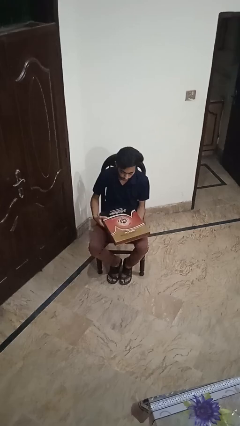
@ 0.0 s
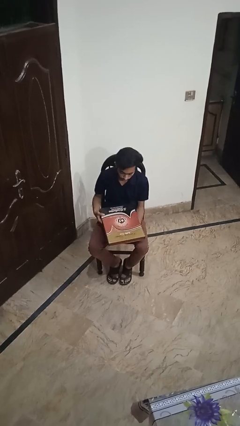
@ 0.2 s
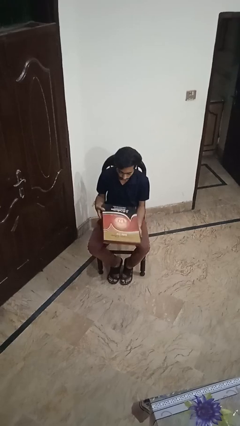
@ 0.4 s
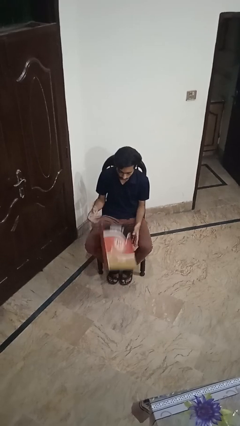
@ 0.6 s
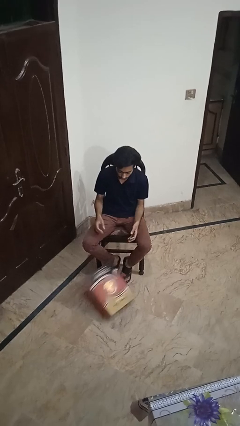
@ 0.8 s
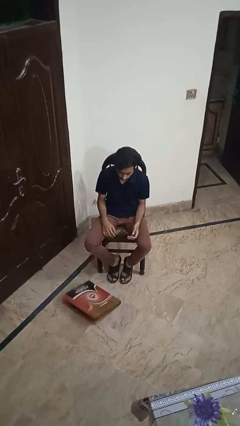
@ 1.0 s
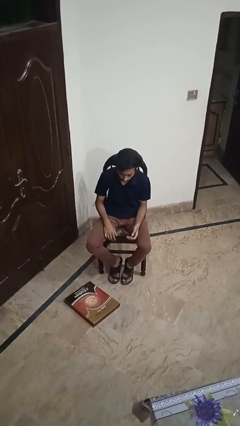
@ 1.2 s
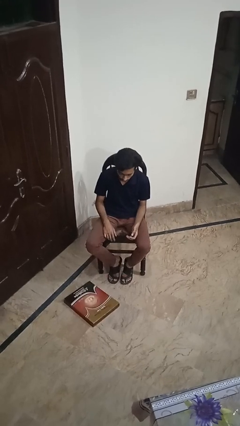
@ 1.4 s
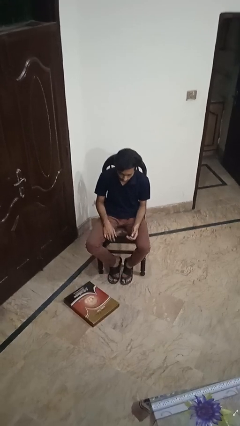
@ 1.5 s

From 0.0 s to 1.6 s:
person drops object

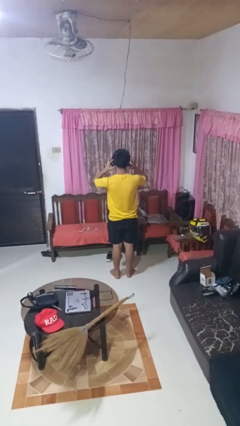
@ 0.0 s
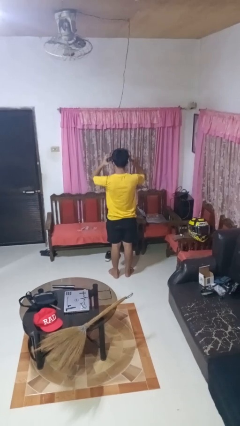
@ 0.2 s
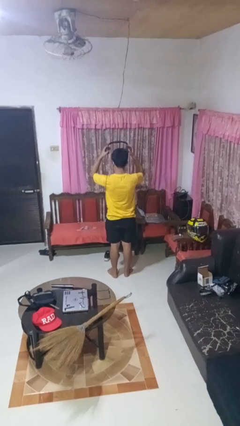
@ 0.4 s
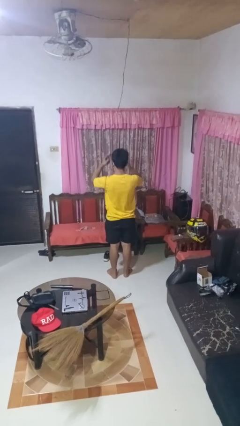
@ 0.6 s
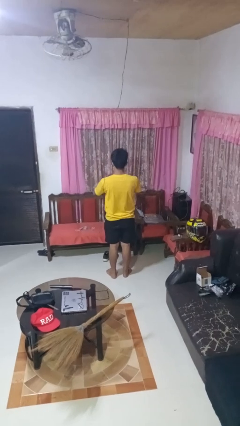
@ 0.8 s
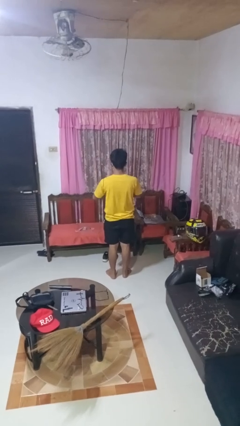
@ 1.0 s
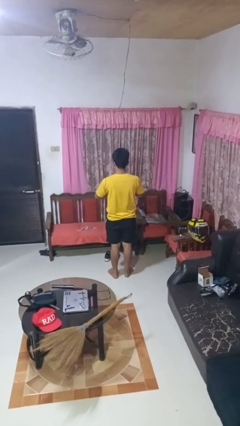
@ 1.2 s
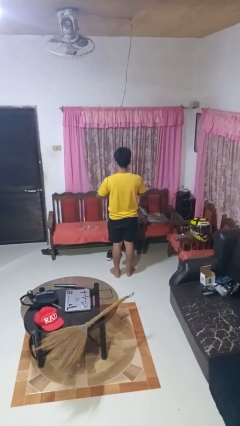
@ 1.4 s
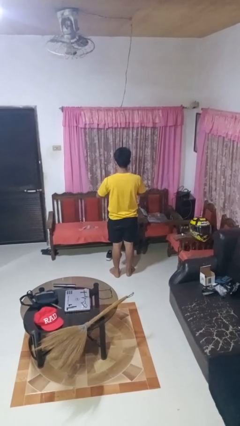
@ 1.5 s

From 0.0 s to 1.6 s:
person takes off headphones

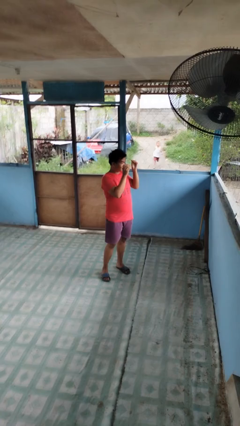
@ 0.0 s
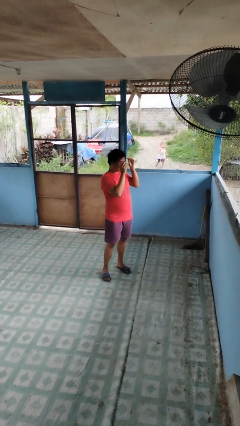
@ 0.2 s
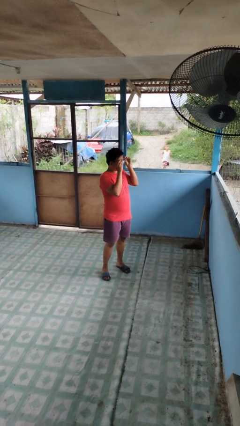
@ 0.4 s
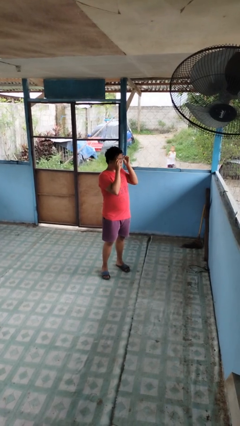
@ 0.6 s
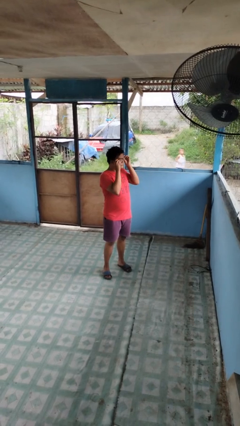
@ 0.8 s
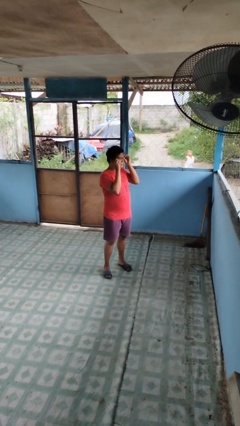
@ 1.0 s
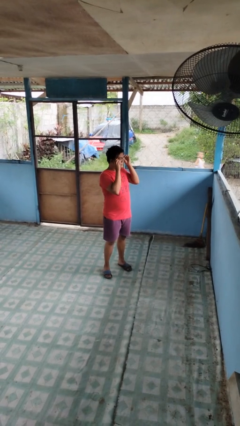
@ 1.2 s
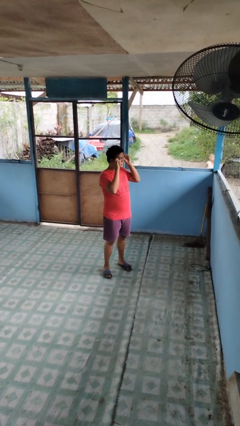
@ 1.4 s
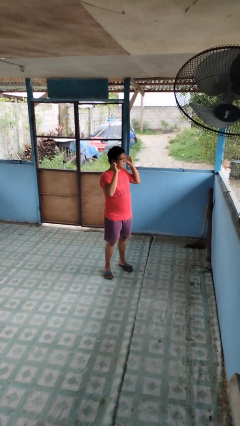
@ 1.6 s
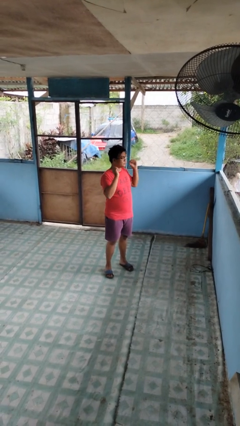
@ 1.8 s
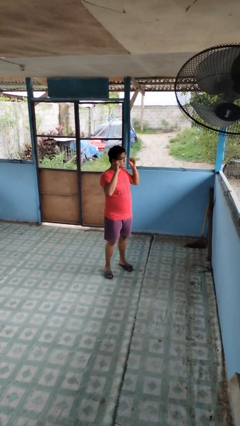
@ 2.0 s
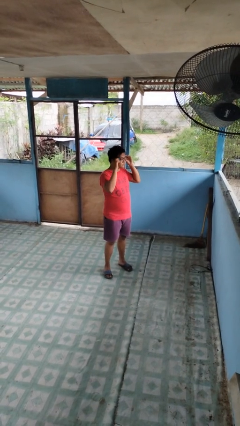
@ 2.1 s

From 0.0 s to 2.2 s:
person puts on glasses

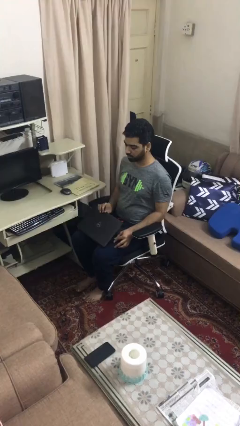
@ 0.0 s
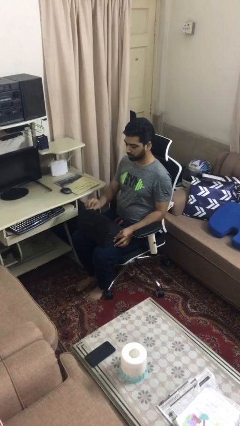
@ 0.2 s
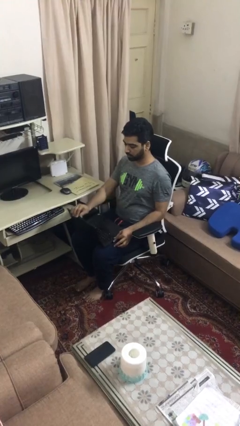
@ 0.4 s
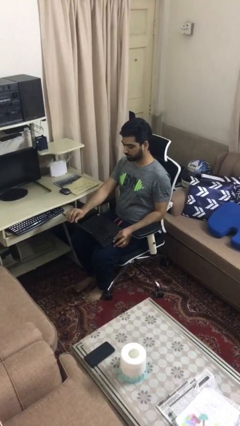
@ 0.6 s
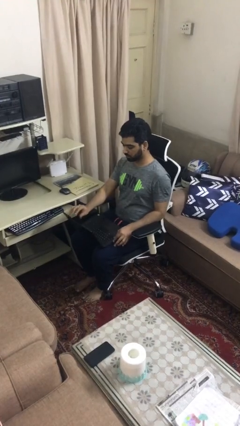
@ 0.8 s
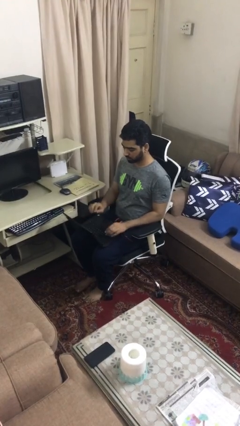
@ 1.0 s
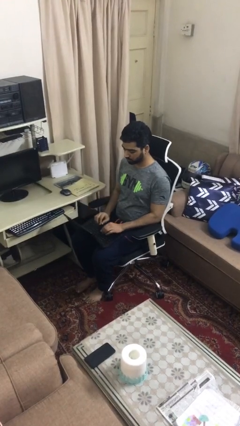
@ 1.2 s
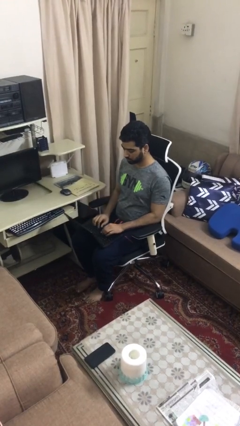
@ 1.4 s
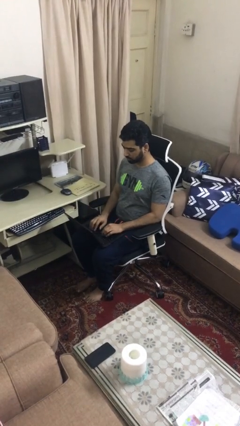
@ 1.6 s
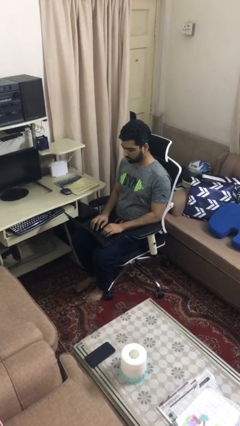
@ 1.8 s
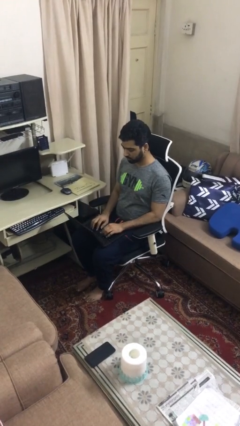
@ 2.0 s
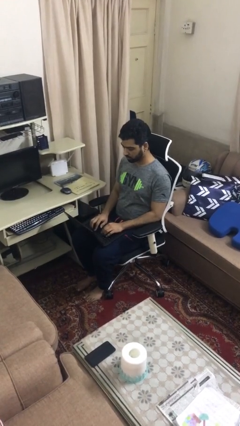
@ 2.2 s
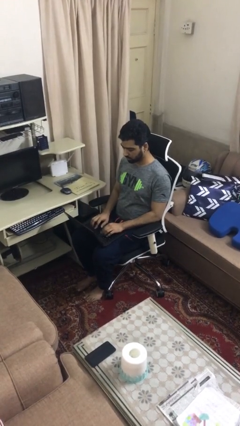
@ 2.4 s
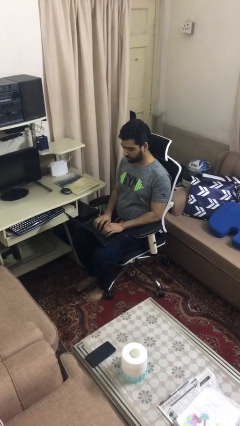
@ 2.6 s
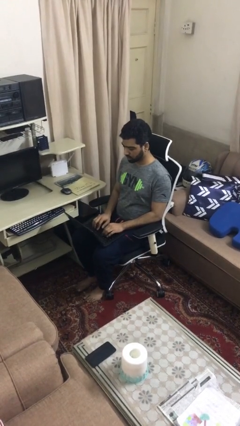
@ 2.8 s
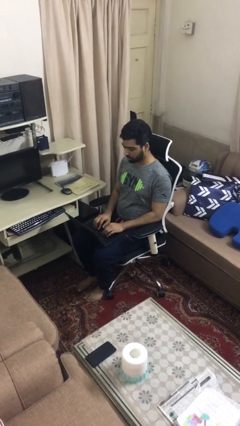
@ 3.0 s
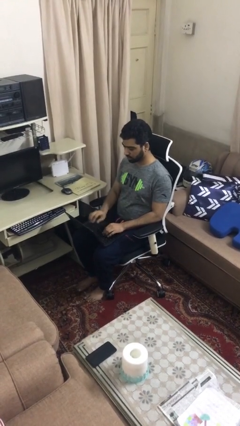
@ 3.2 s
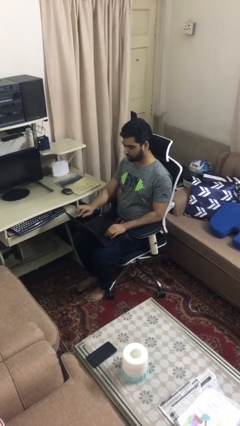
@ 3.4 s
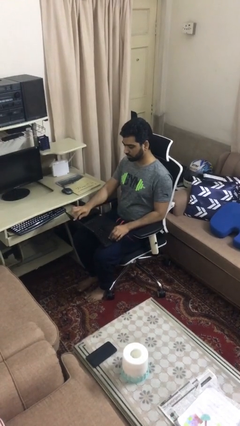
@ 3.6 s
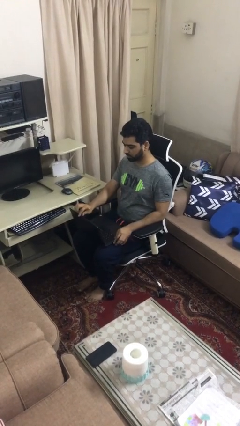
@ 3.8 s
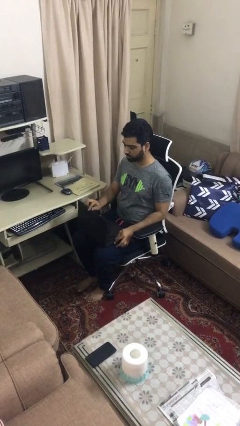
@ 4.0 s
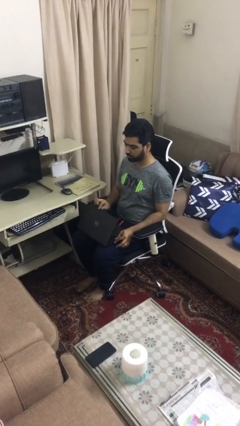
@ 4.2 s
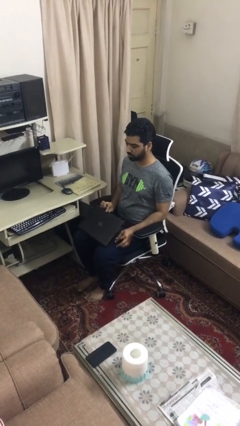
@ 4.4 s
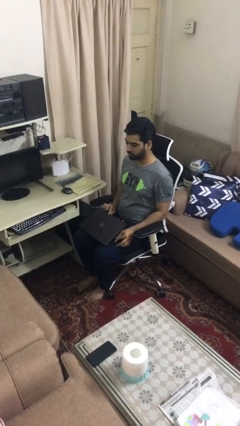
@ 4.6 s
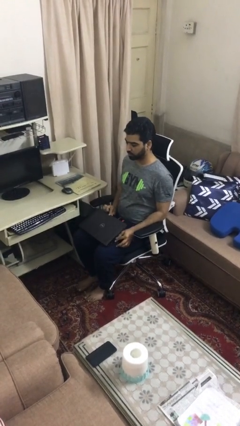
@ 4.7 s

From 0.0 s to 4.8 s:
person interacts with laptop

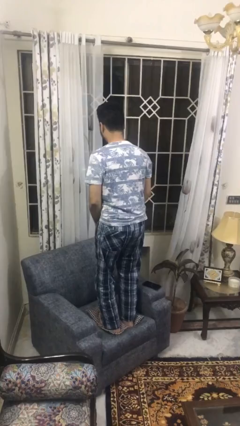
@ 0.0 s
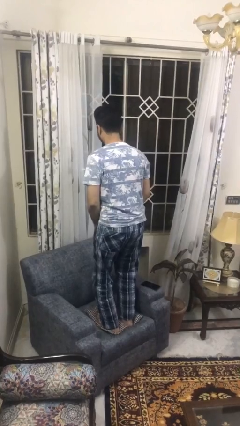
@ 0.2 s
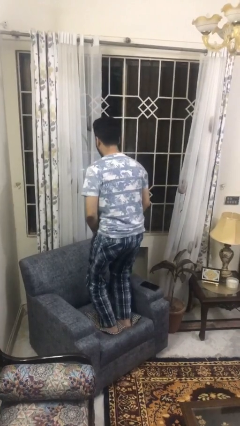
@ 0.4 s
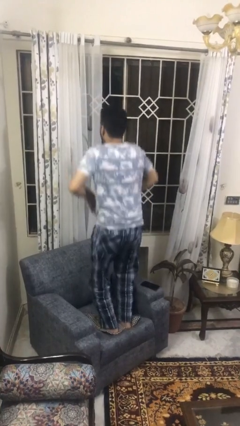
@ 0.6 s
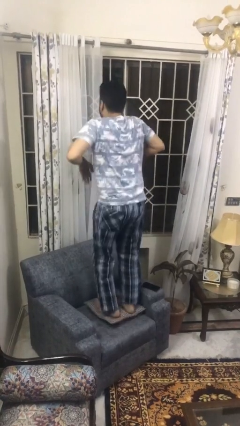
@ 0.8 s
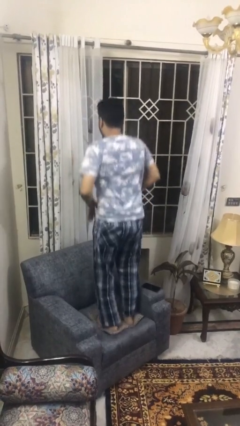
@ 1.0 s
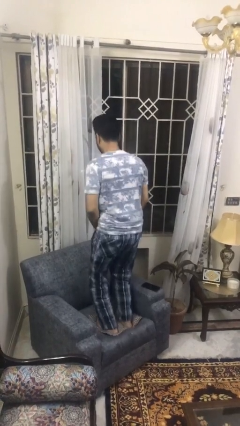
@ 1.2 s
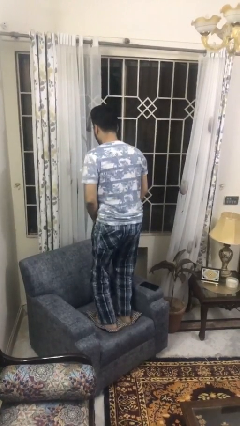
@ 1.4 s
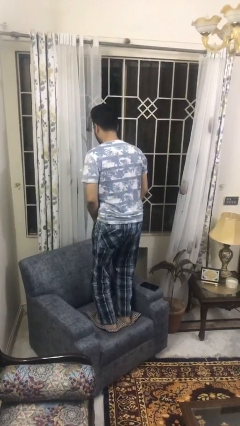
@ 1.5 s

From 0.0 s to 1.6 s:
person jumps on couch

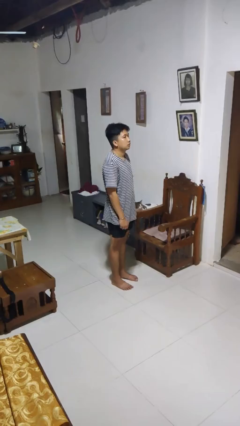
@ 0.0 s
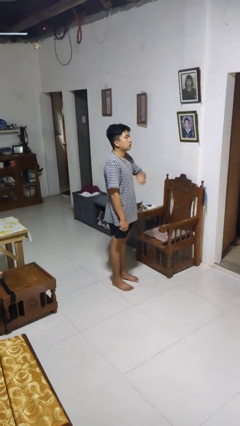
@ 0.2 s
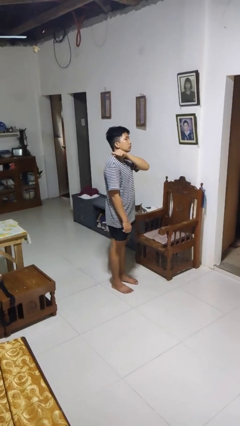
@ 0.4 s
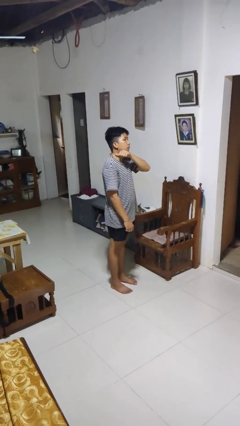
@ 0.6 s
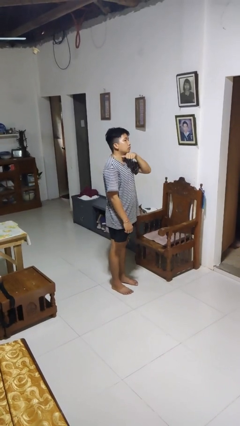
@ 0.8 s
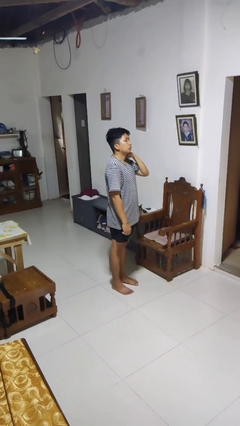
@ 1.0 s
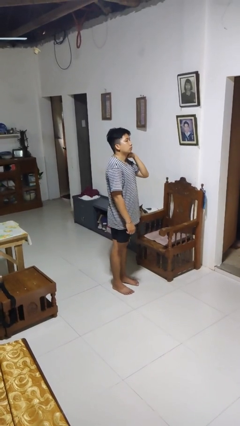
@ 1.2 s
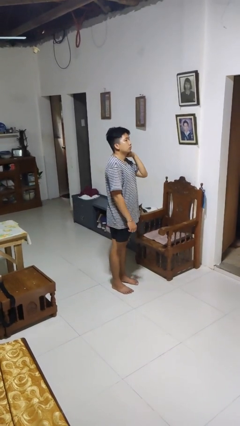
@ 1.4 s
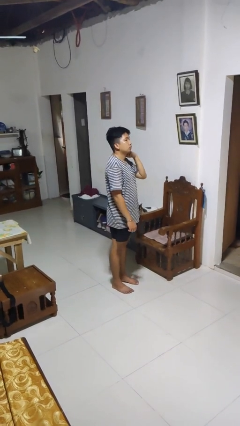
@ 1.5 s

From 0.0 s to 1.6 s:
person gestures cut

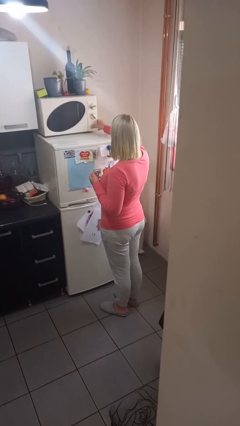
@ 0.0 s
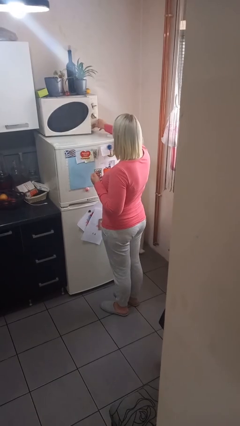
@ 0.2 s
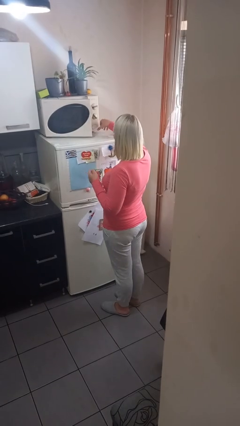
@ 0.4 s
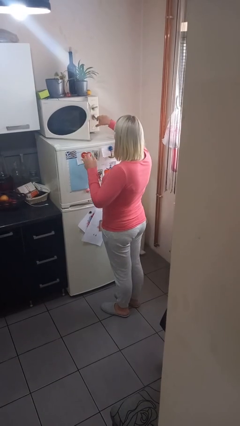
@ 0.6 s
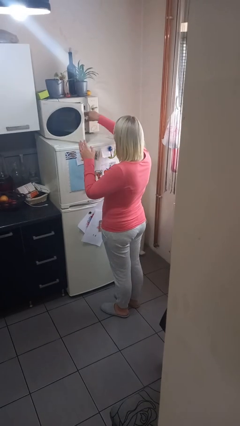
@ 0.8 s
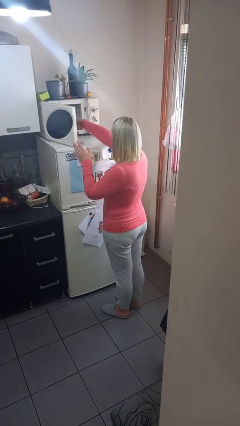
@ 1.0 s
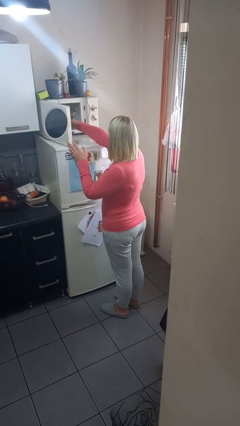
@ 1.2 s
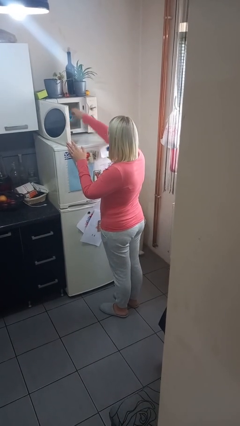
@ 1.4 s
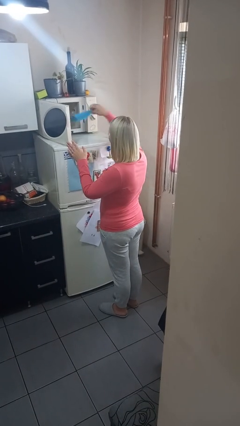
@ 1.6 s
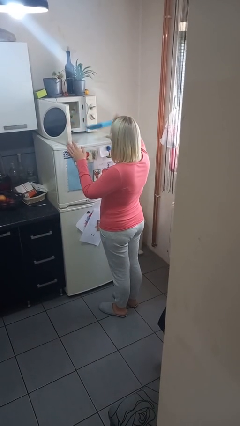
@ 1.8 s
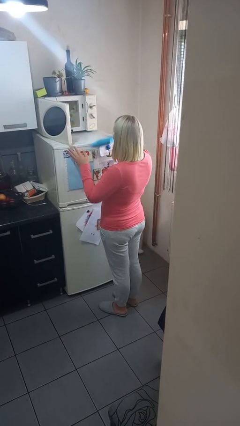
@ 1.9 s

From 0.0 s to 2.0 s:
person takes object from microwave

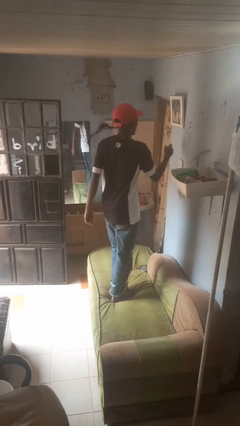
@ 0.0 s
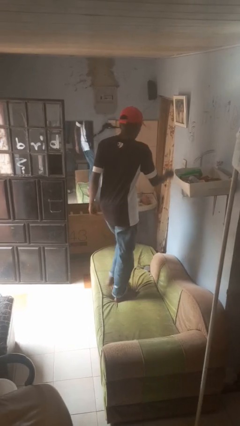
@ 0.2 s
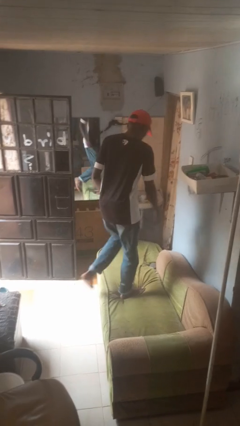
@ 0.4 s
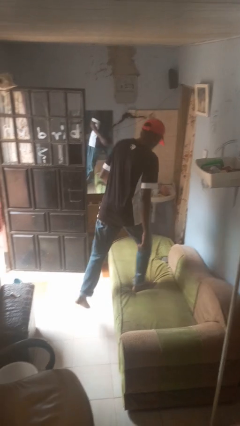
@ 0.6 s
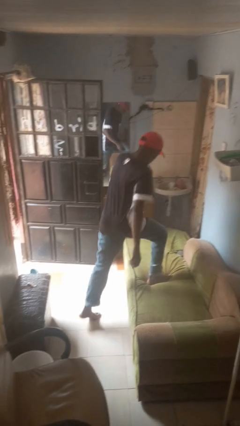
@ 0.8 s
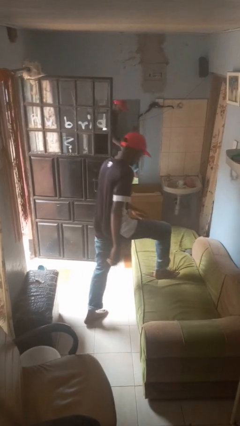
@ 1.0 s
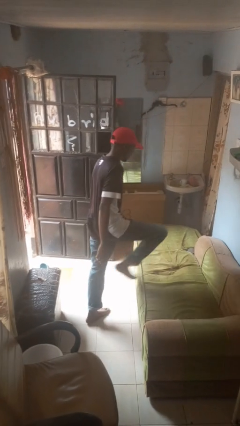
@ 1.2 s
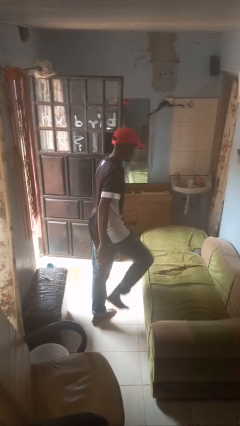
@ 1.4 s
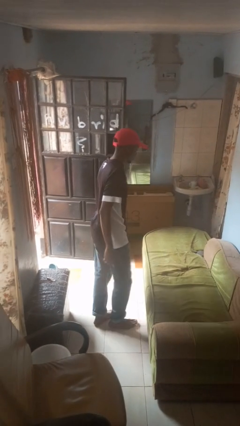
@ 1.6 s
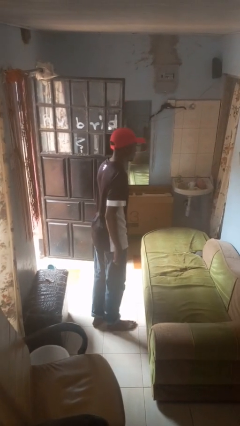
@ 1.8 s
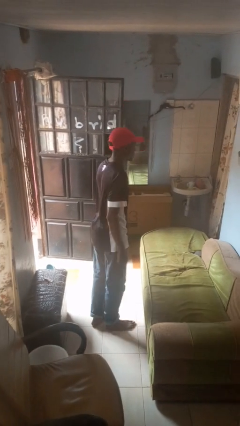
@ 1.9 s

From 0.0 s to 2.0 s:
person climbs off couch
